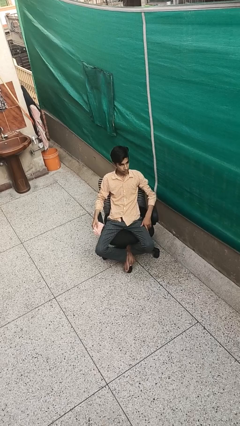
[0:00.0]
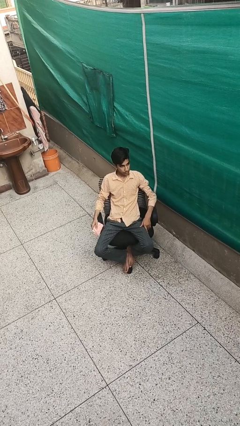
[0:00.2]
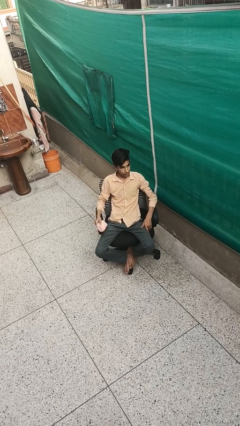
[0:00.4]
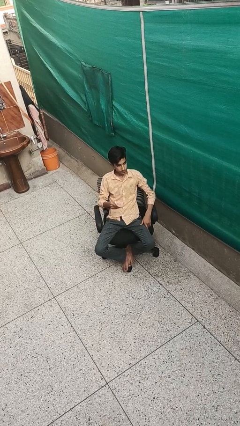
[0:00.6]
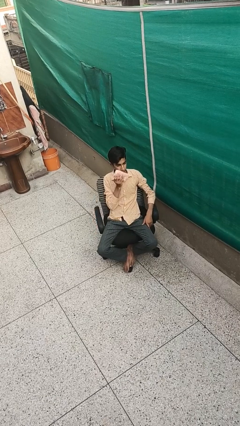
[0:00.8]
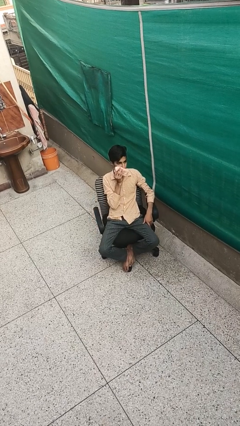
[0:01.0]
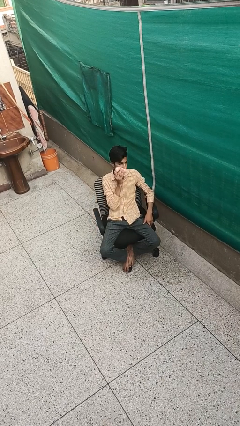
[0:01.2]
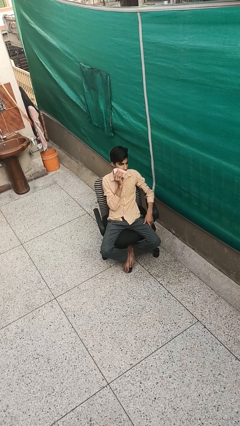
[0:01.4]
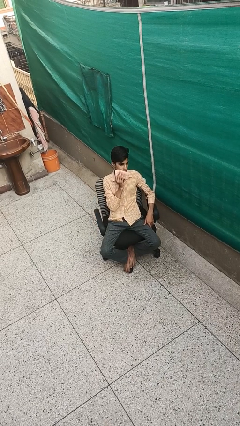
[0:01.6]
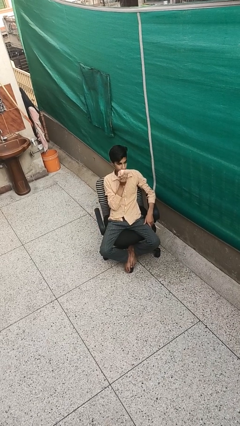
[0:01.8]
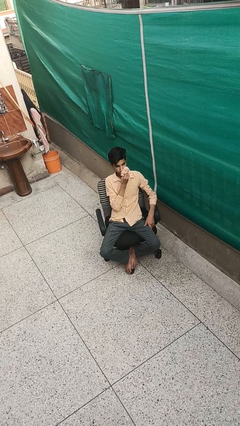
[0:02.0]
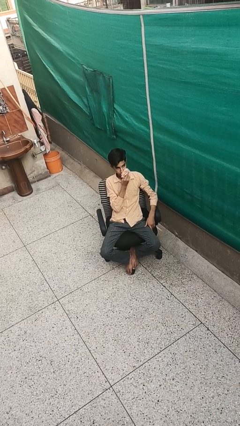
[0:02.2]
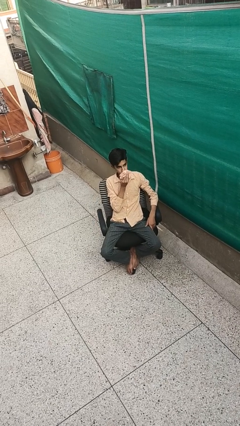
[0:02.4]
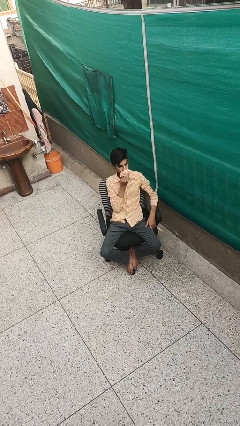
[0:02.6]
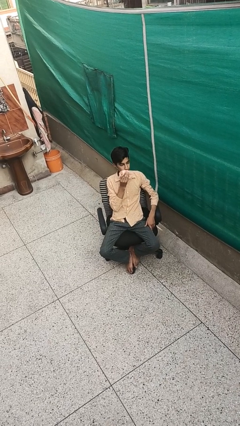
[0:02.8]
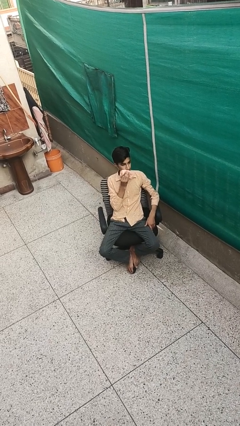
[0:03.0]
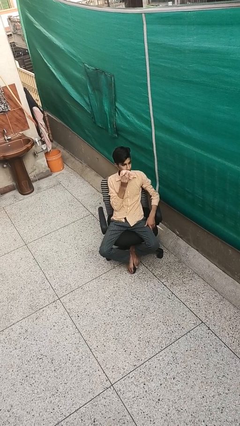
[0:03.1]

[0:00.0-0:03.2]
person wipes mouth with napkin

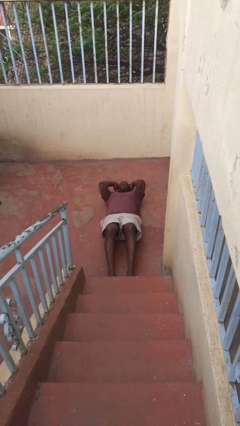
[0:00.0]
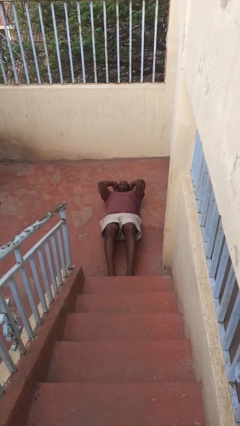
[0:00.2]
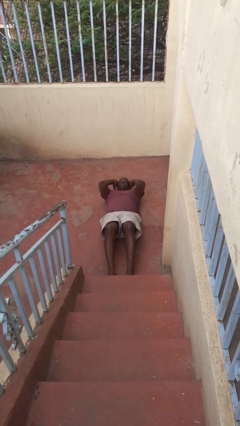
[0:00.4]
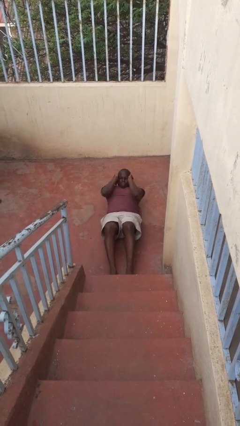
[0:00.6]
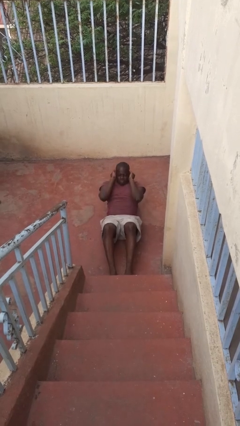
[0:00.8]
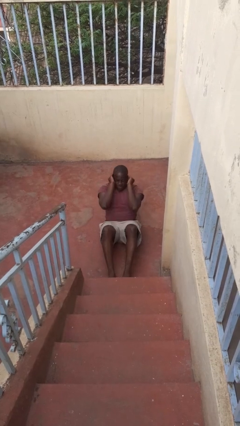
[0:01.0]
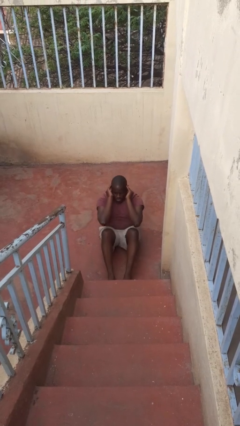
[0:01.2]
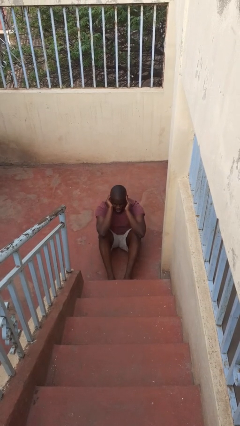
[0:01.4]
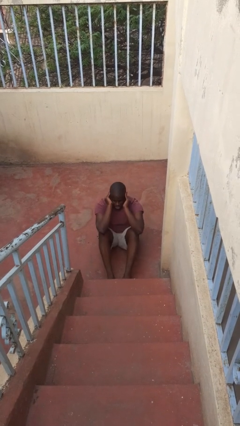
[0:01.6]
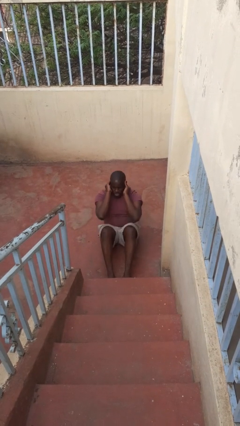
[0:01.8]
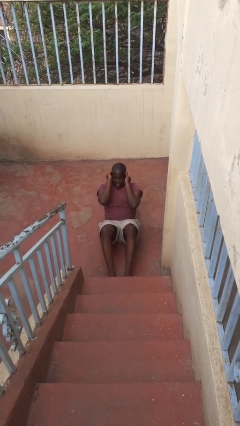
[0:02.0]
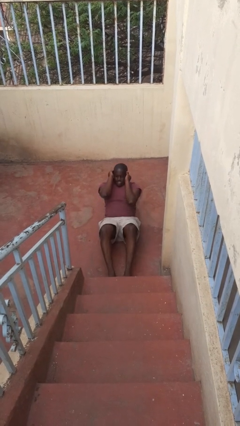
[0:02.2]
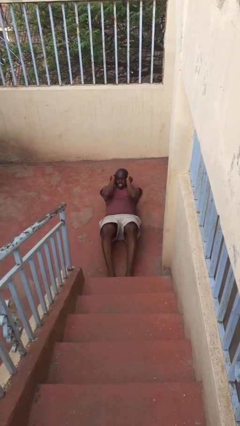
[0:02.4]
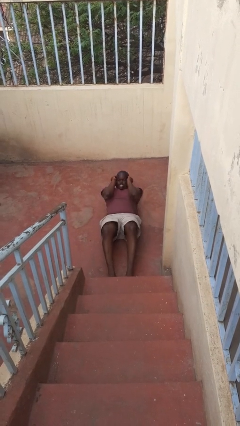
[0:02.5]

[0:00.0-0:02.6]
person exercises with situp

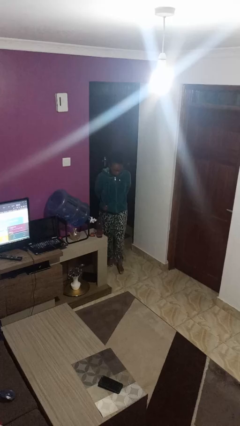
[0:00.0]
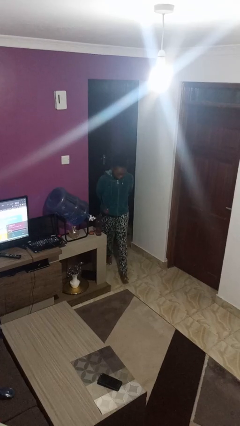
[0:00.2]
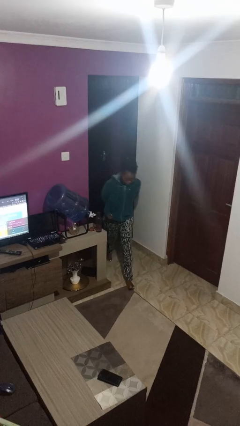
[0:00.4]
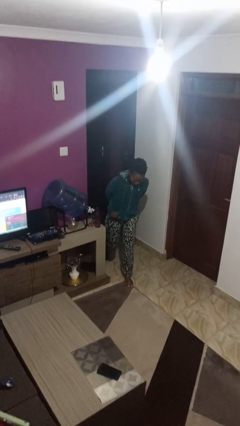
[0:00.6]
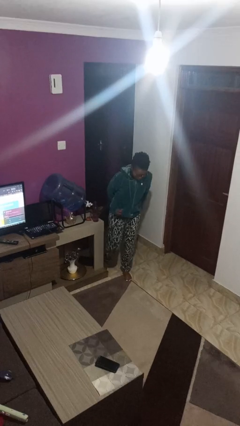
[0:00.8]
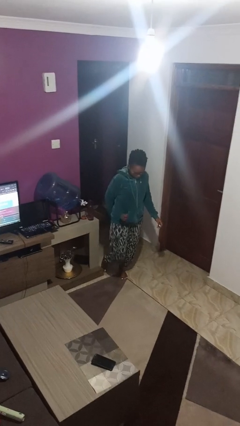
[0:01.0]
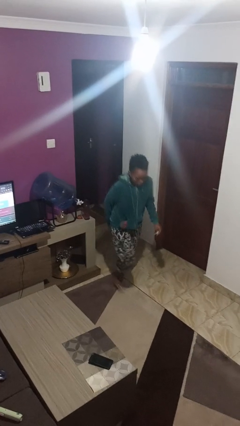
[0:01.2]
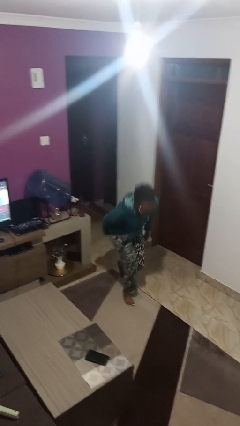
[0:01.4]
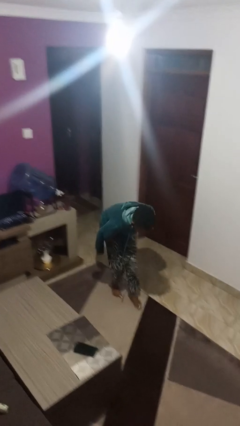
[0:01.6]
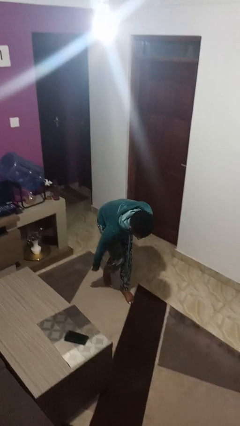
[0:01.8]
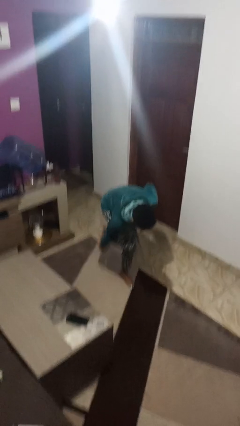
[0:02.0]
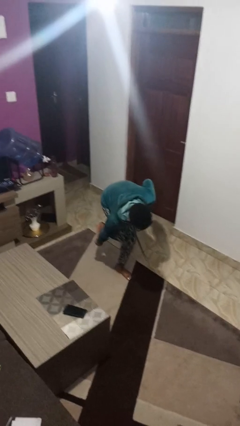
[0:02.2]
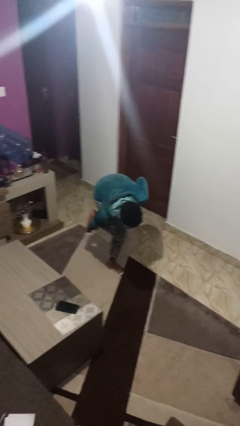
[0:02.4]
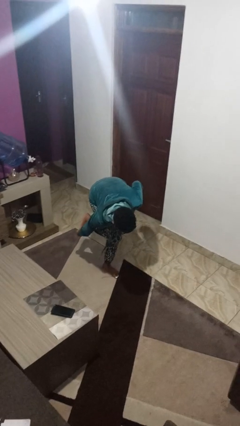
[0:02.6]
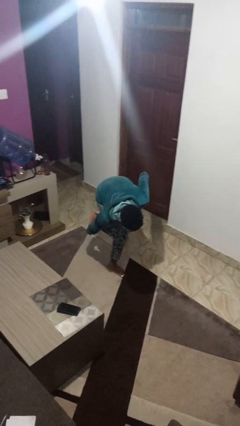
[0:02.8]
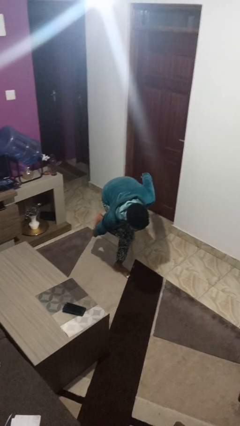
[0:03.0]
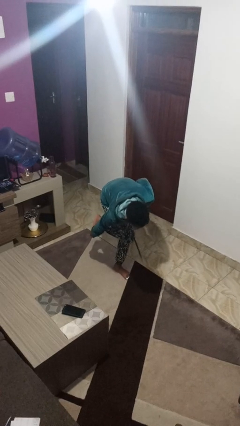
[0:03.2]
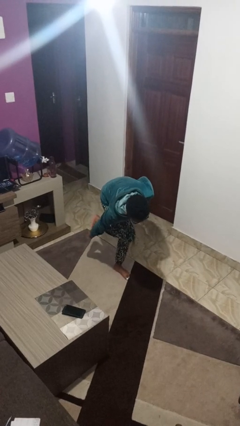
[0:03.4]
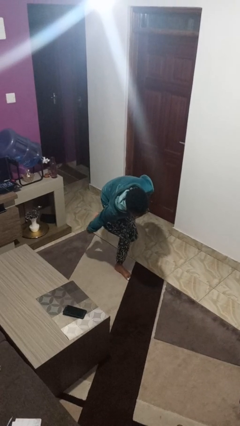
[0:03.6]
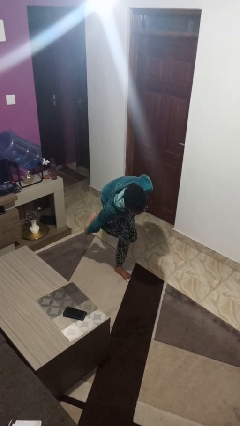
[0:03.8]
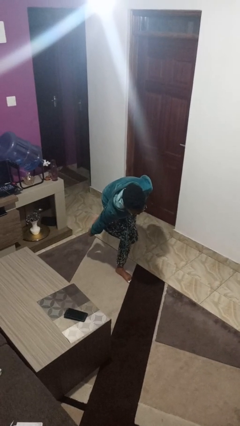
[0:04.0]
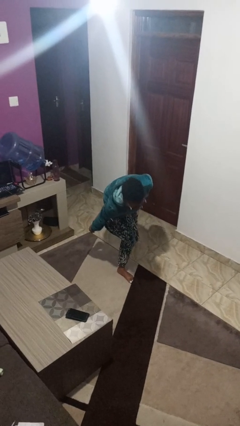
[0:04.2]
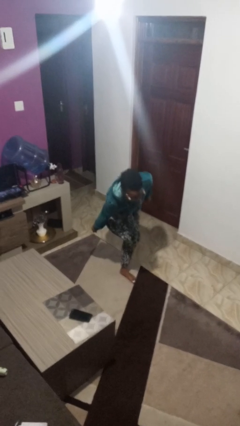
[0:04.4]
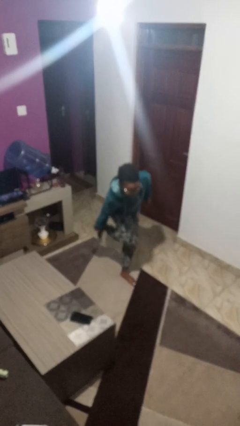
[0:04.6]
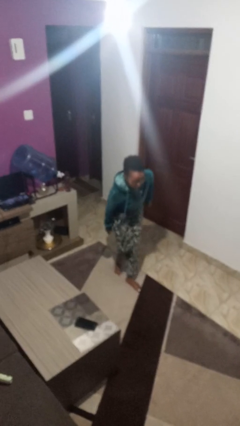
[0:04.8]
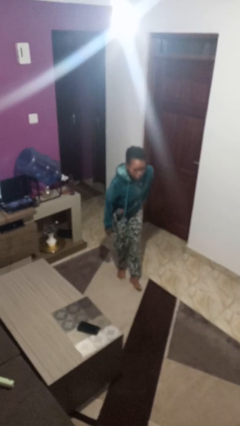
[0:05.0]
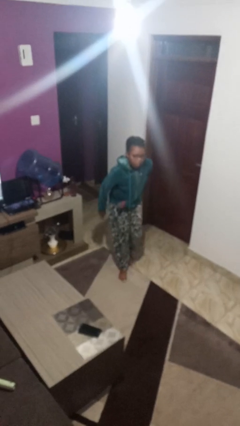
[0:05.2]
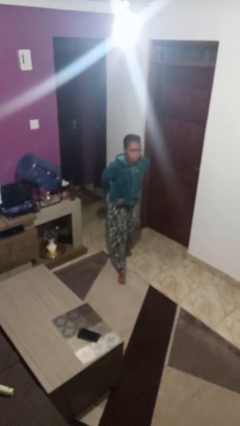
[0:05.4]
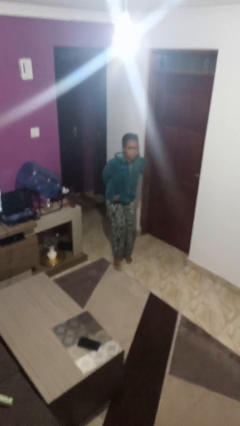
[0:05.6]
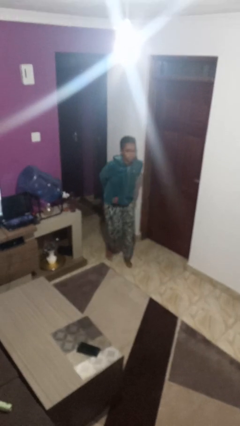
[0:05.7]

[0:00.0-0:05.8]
person stubs toe

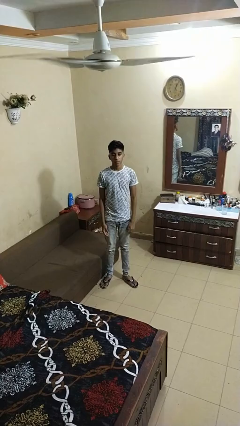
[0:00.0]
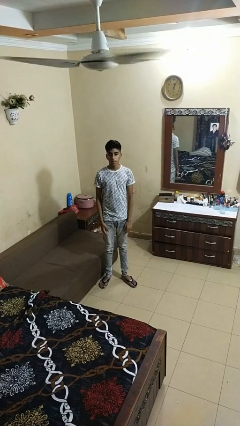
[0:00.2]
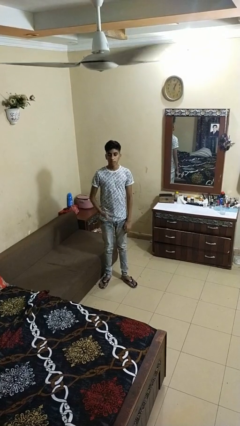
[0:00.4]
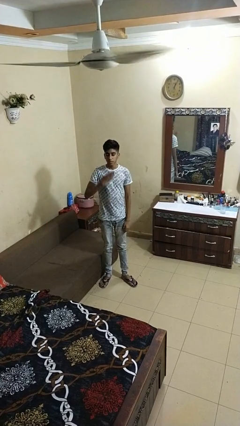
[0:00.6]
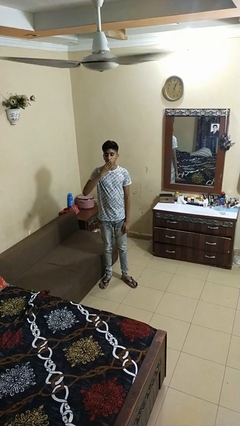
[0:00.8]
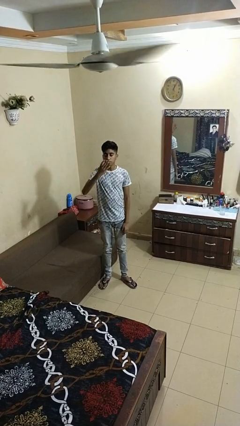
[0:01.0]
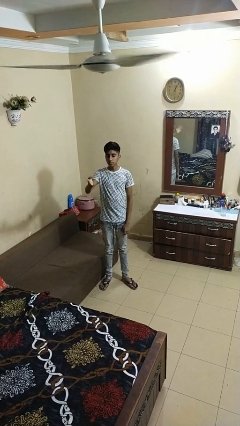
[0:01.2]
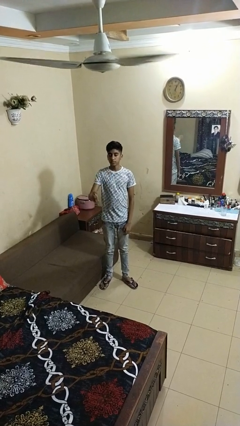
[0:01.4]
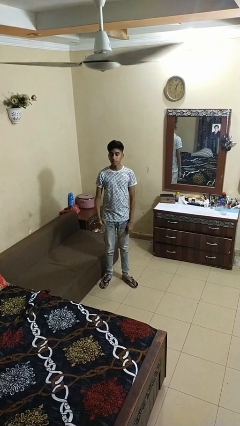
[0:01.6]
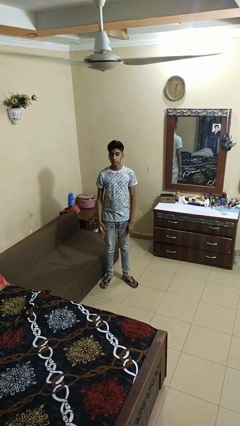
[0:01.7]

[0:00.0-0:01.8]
person gestures blow kiss

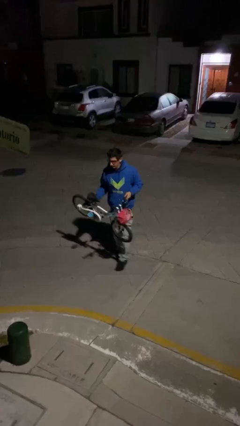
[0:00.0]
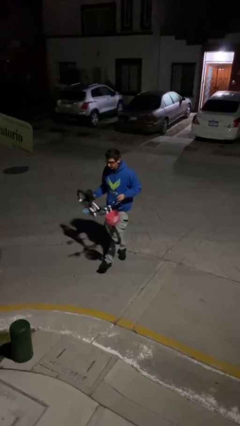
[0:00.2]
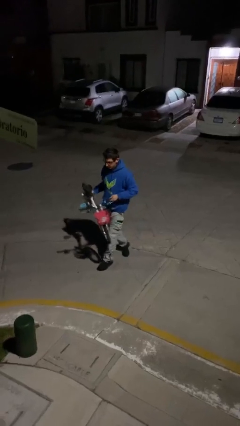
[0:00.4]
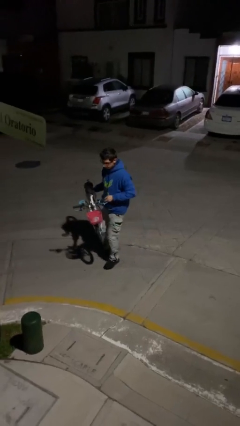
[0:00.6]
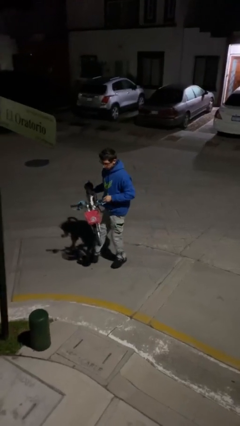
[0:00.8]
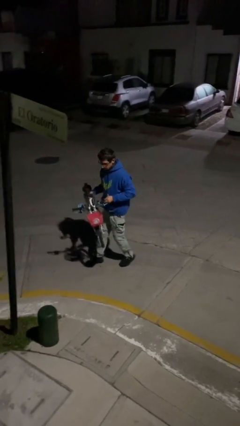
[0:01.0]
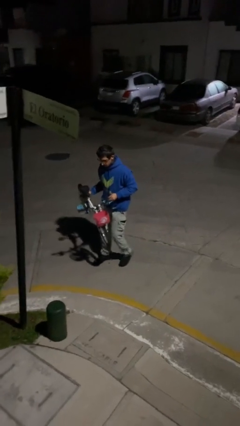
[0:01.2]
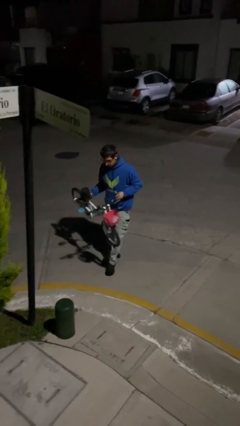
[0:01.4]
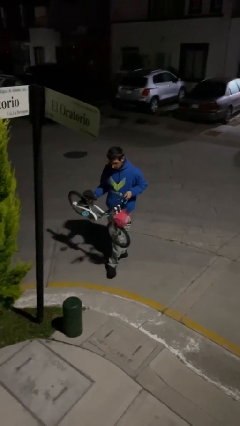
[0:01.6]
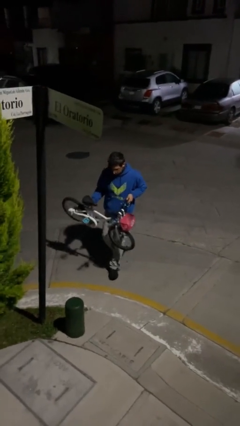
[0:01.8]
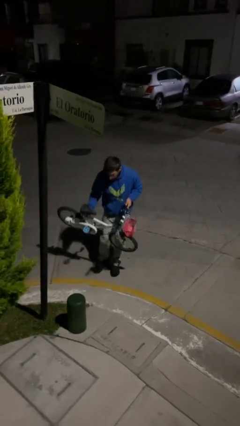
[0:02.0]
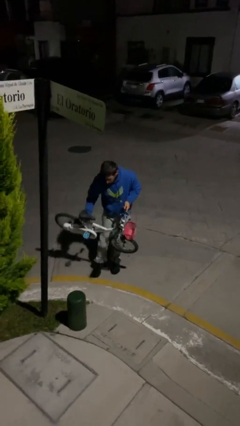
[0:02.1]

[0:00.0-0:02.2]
person carries heavy object

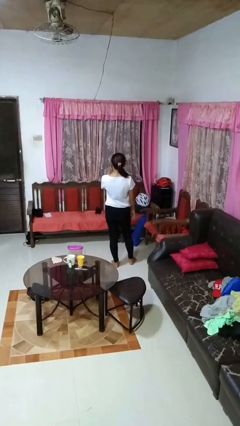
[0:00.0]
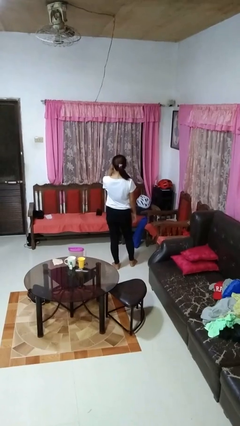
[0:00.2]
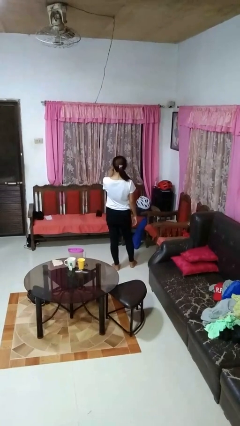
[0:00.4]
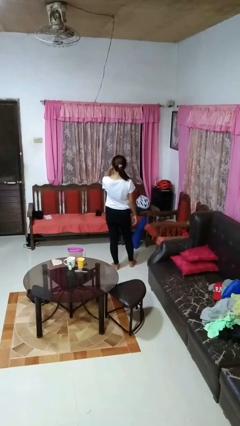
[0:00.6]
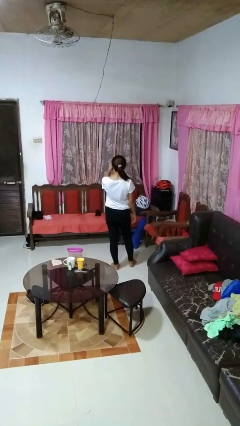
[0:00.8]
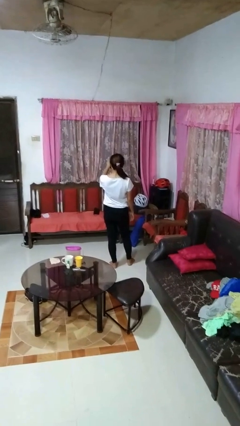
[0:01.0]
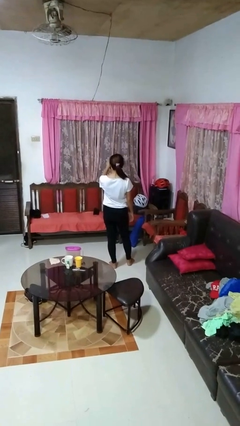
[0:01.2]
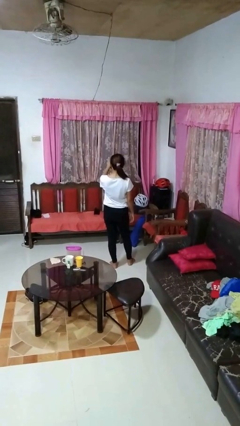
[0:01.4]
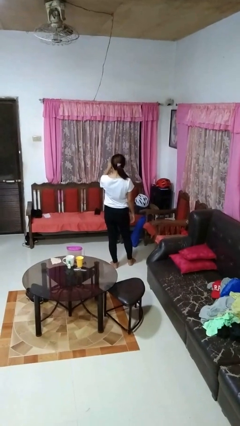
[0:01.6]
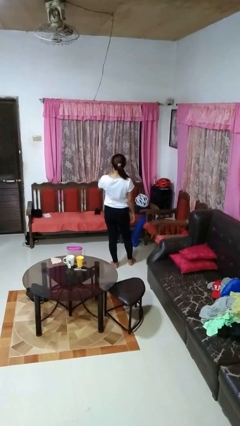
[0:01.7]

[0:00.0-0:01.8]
person gestures watch closely

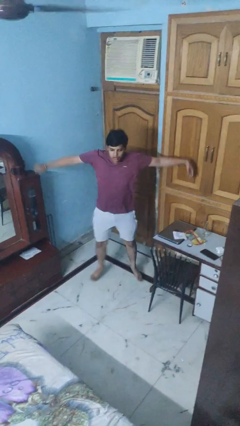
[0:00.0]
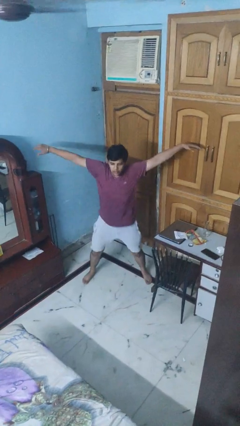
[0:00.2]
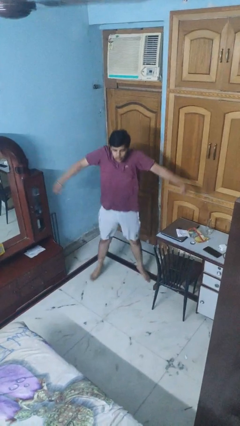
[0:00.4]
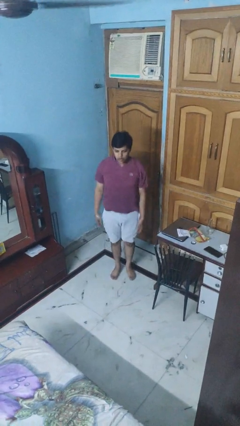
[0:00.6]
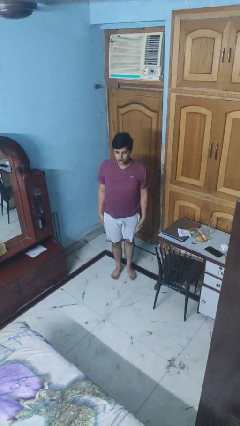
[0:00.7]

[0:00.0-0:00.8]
person exercises with jumping jacks
